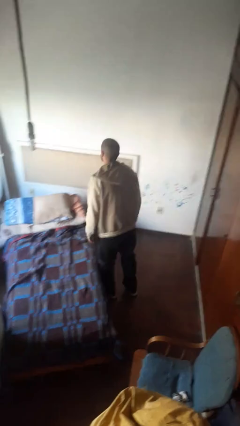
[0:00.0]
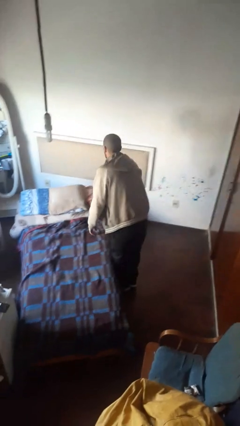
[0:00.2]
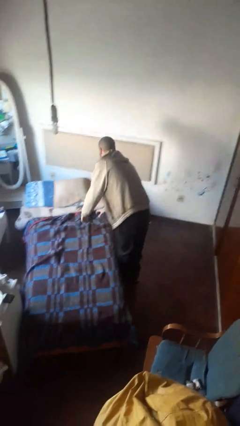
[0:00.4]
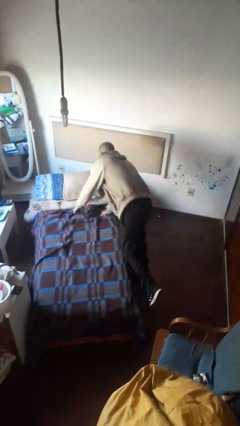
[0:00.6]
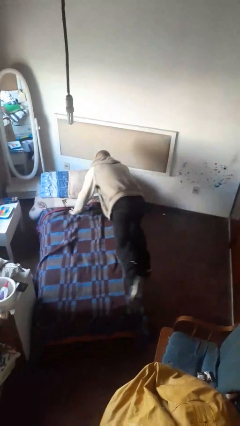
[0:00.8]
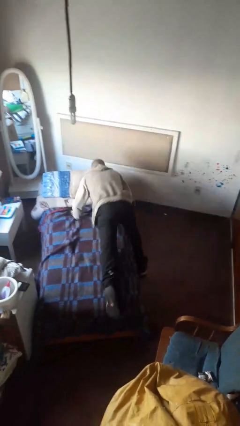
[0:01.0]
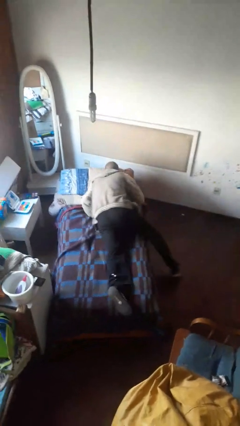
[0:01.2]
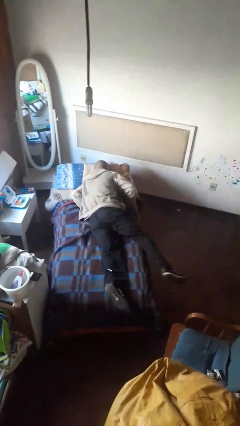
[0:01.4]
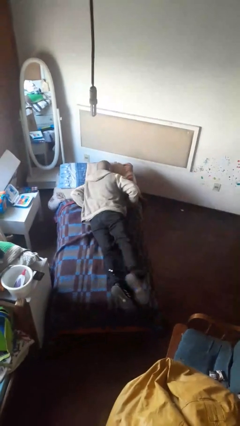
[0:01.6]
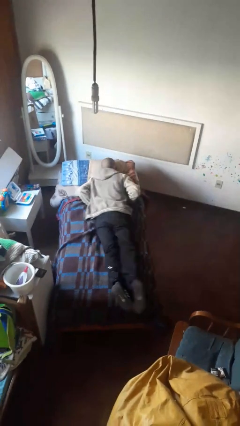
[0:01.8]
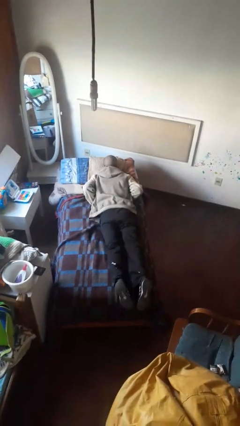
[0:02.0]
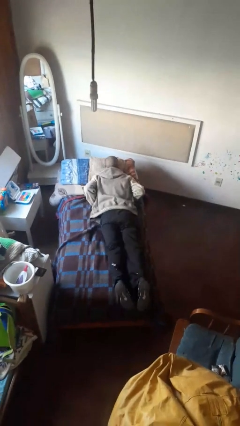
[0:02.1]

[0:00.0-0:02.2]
person lies down on bed

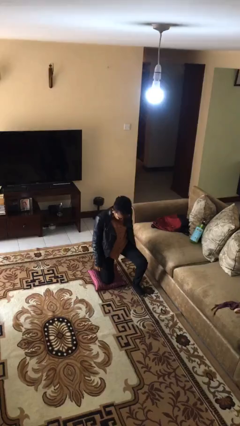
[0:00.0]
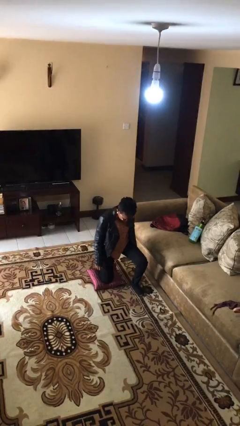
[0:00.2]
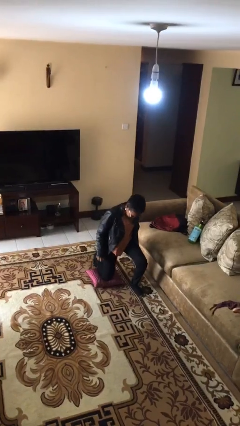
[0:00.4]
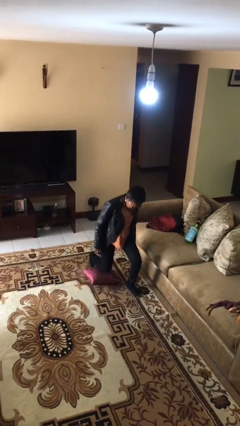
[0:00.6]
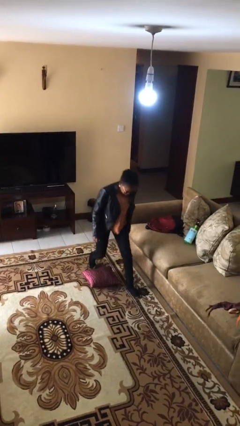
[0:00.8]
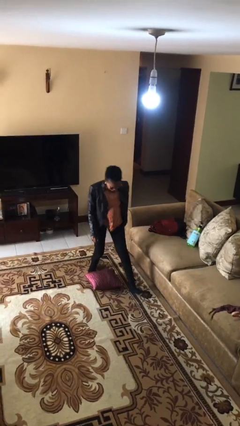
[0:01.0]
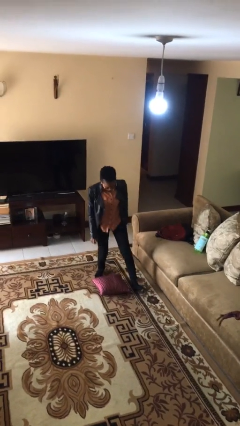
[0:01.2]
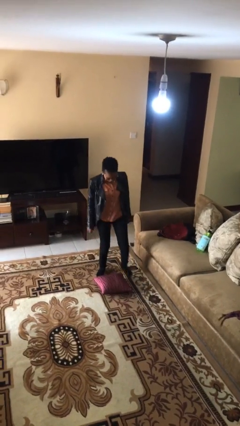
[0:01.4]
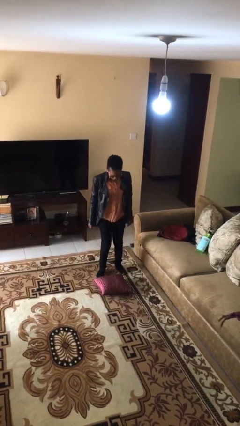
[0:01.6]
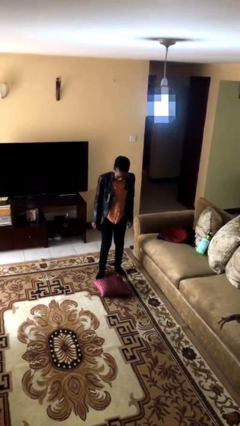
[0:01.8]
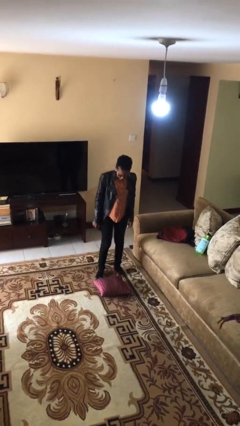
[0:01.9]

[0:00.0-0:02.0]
person stands up from floor

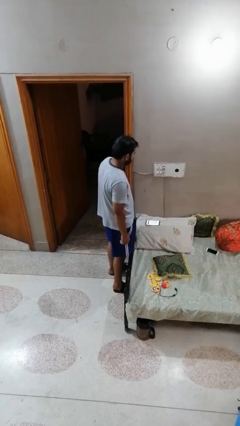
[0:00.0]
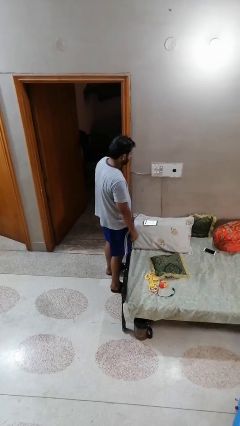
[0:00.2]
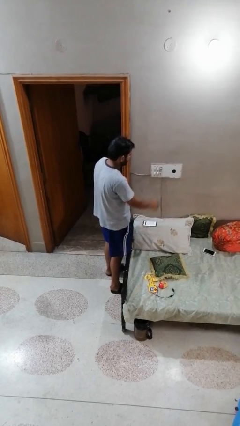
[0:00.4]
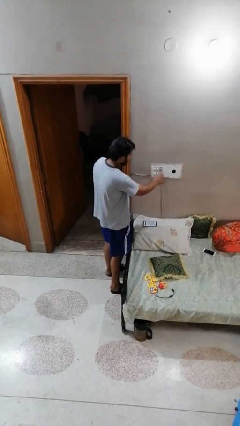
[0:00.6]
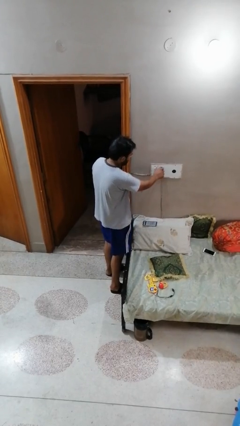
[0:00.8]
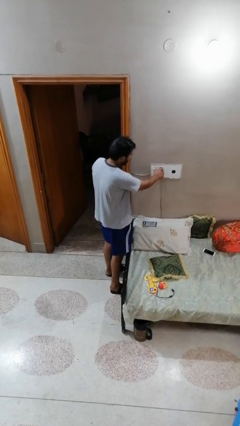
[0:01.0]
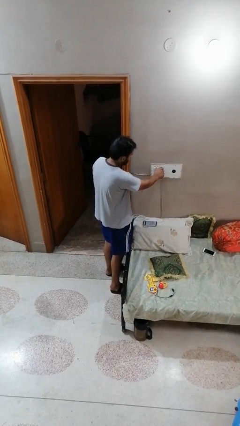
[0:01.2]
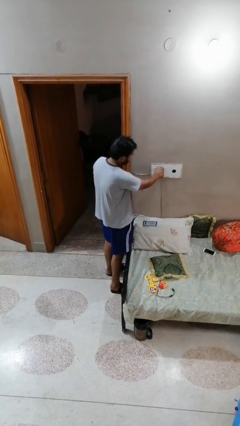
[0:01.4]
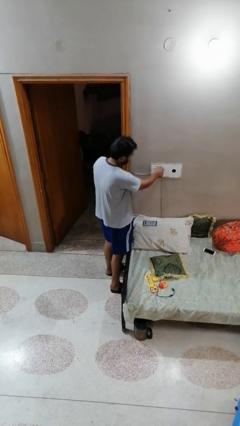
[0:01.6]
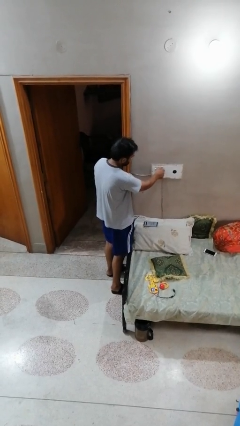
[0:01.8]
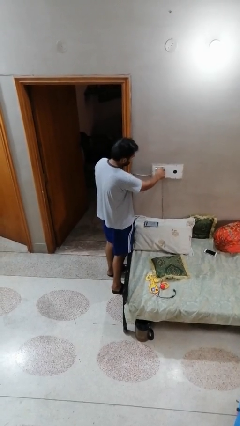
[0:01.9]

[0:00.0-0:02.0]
person adjusts thermostat

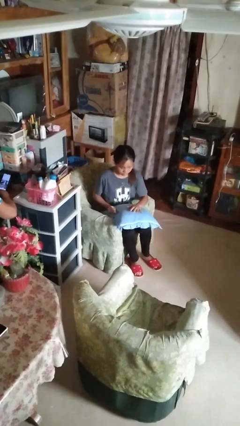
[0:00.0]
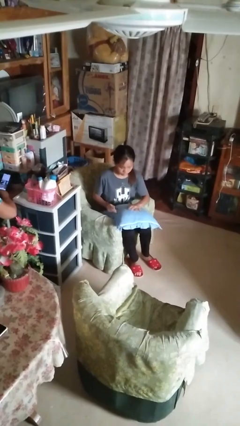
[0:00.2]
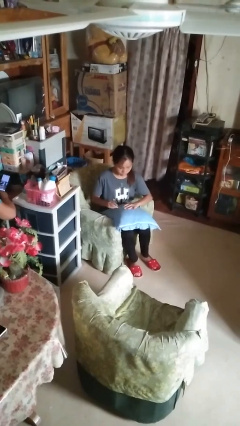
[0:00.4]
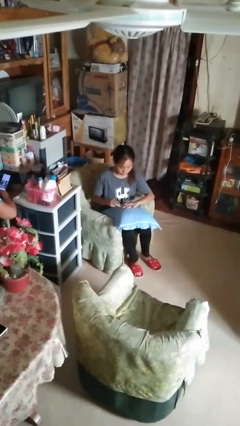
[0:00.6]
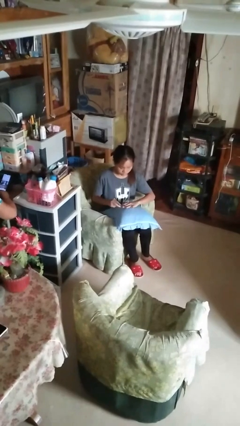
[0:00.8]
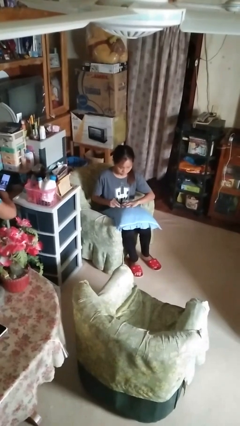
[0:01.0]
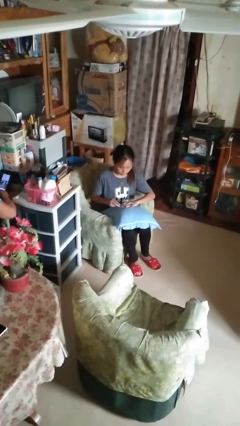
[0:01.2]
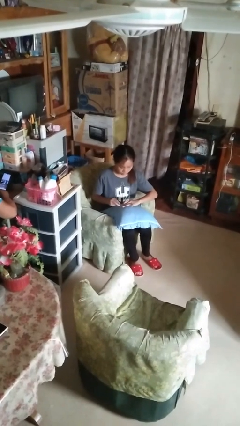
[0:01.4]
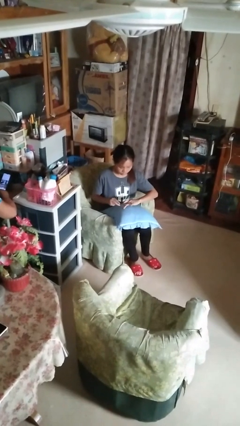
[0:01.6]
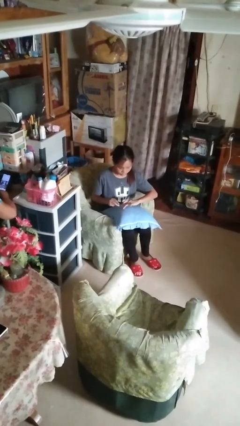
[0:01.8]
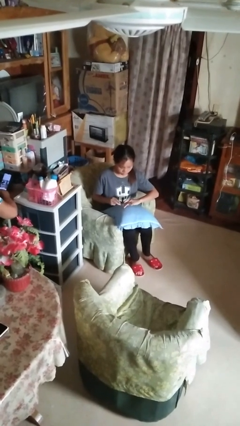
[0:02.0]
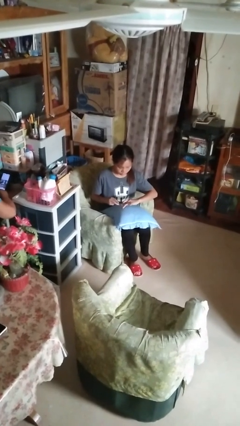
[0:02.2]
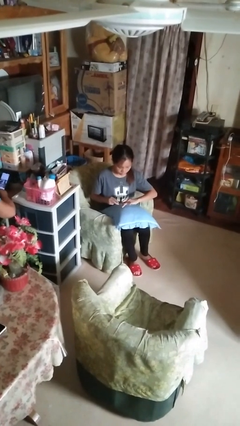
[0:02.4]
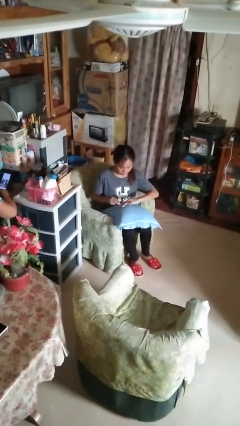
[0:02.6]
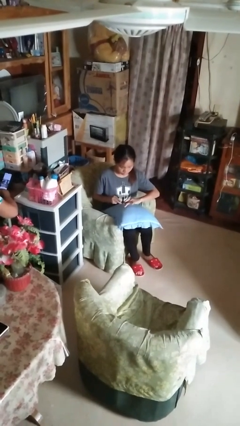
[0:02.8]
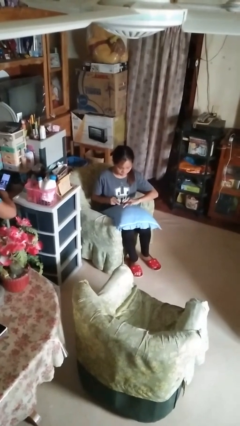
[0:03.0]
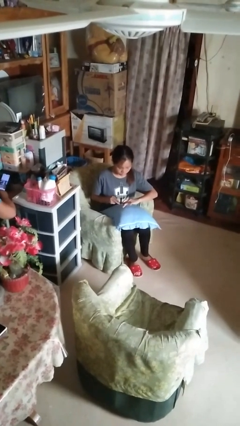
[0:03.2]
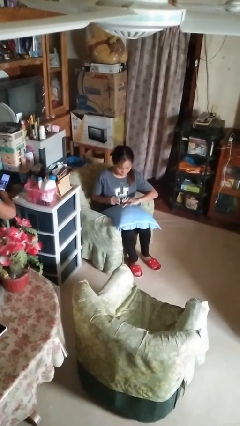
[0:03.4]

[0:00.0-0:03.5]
person files fingernails

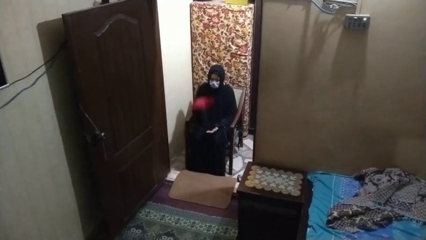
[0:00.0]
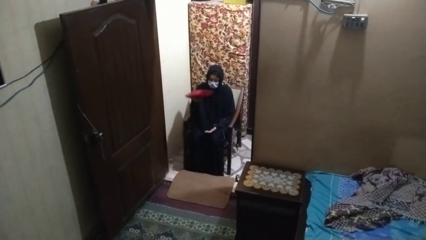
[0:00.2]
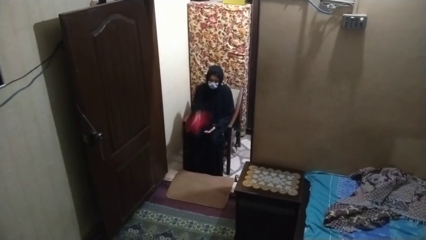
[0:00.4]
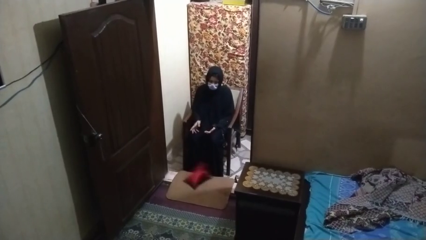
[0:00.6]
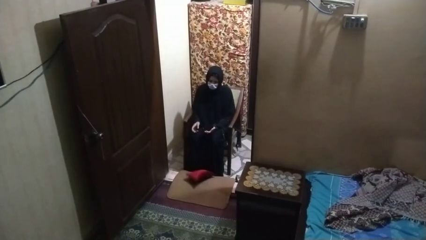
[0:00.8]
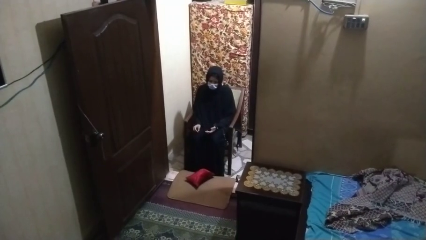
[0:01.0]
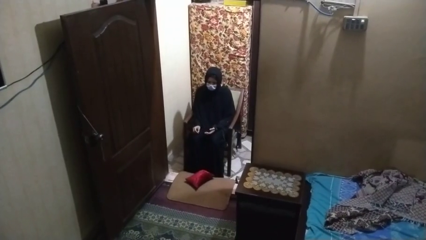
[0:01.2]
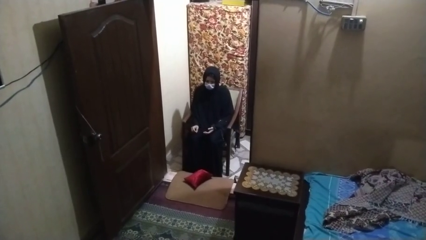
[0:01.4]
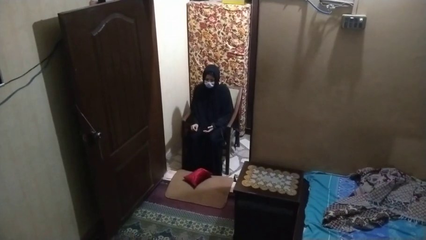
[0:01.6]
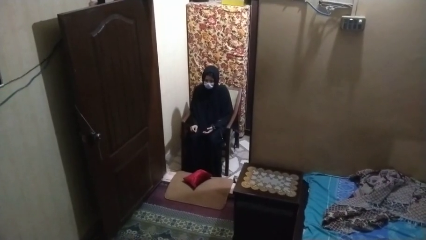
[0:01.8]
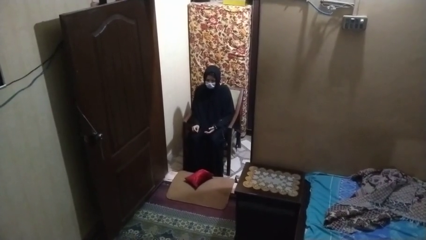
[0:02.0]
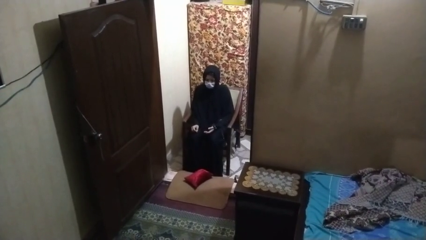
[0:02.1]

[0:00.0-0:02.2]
person throws object into air

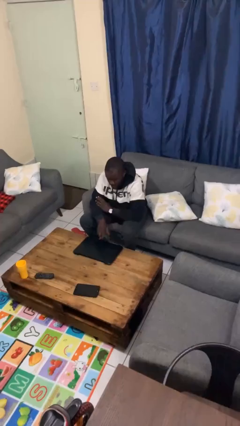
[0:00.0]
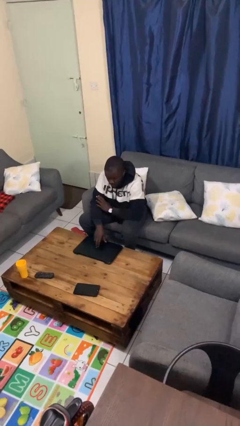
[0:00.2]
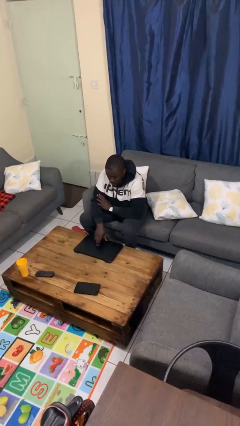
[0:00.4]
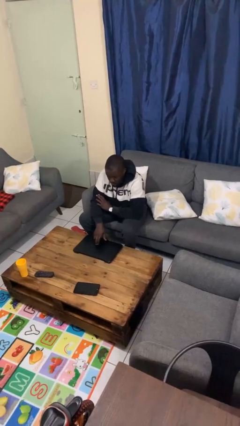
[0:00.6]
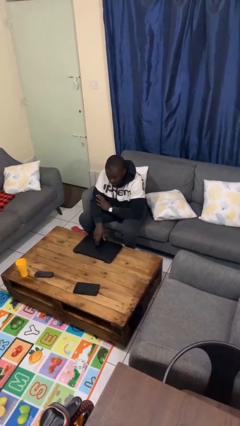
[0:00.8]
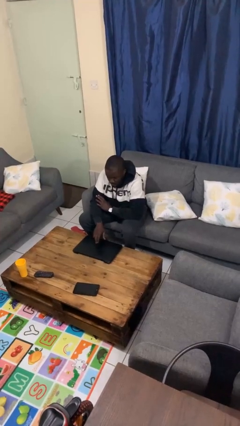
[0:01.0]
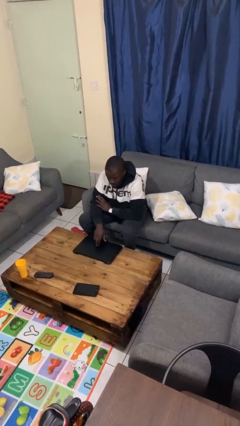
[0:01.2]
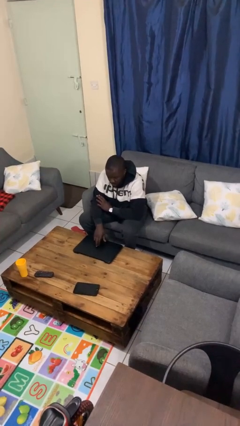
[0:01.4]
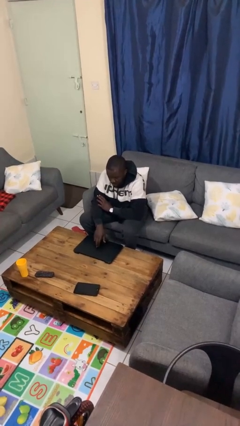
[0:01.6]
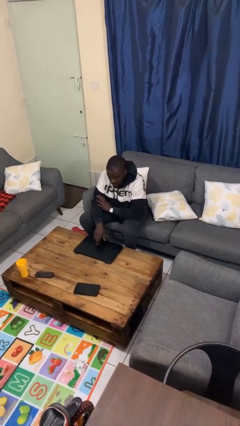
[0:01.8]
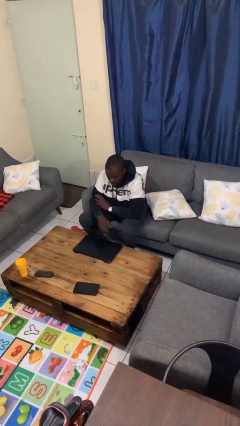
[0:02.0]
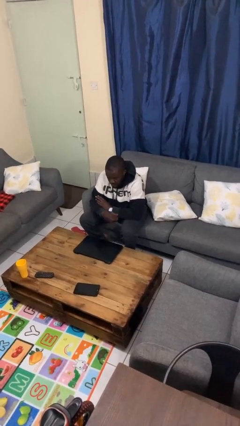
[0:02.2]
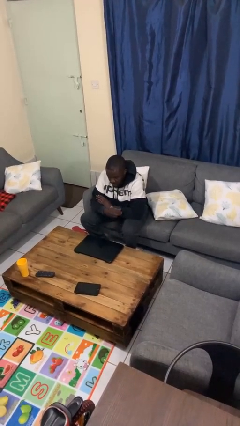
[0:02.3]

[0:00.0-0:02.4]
person taps object with finger

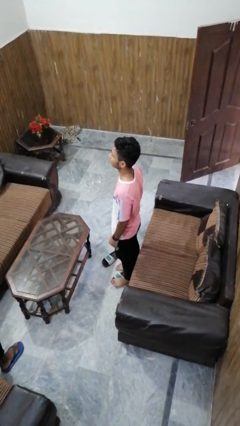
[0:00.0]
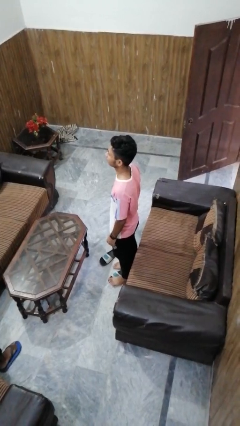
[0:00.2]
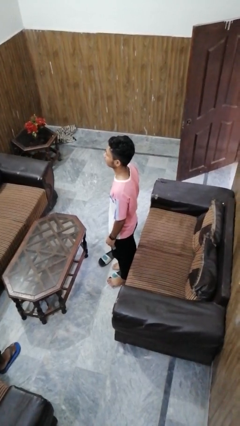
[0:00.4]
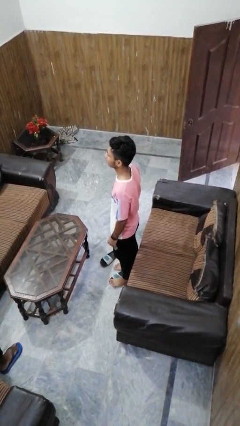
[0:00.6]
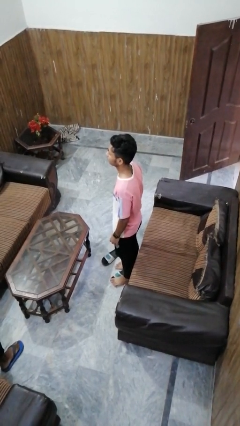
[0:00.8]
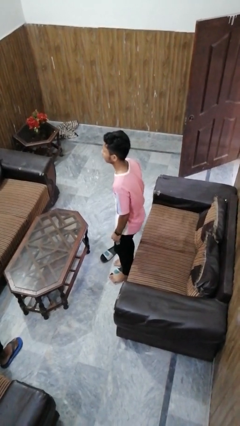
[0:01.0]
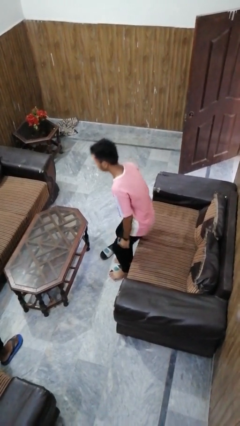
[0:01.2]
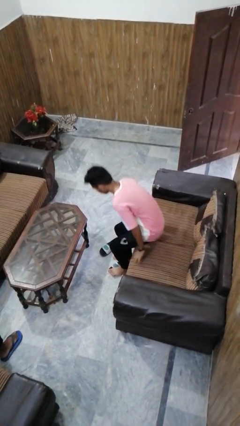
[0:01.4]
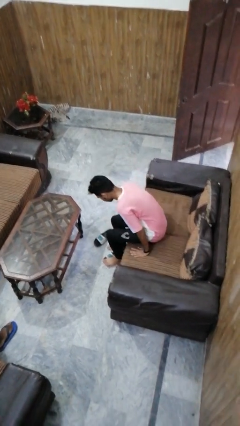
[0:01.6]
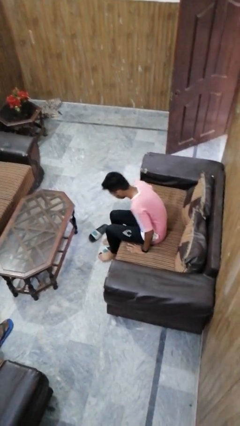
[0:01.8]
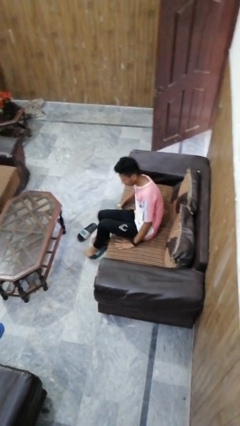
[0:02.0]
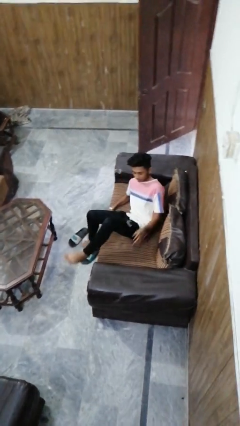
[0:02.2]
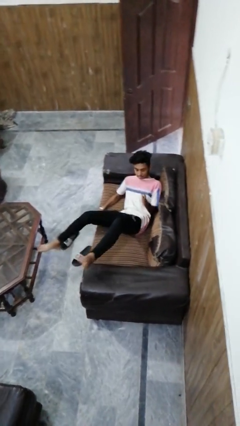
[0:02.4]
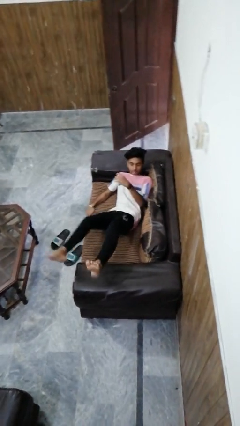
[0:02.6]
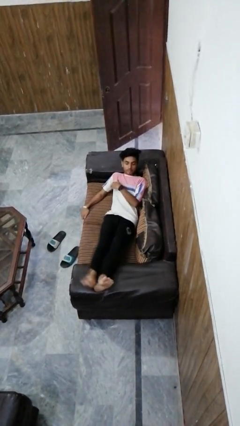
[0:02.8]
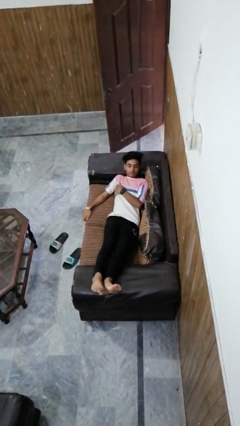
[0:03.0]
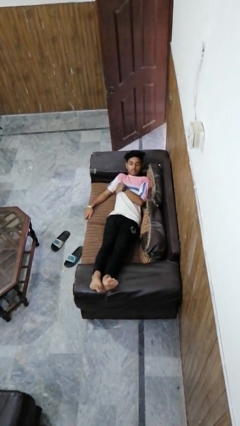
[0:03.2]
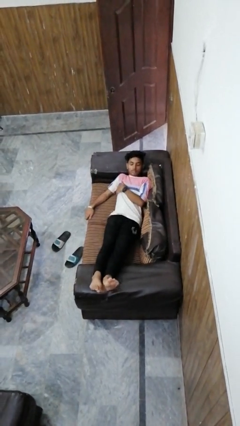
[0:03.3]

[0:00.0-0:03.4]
person lies down on couch
